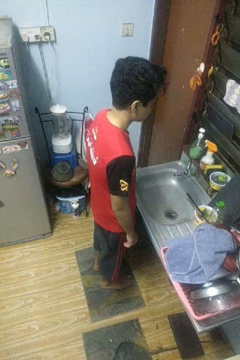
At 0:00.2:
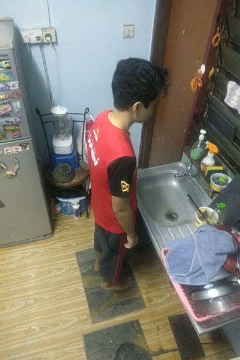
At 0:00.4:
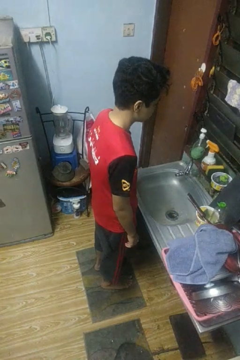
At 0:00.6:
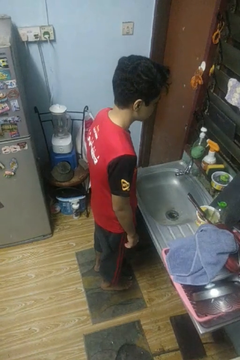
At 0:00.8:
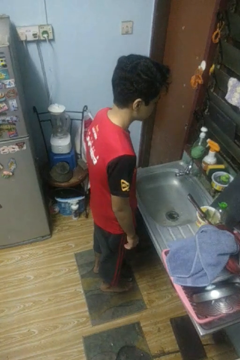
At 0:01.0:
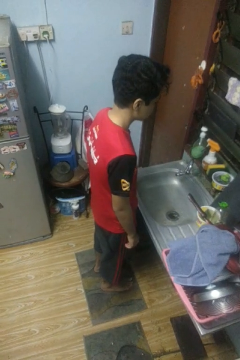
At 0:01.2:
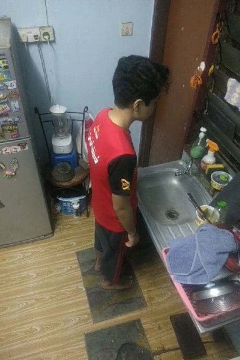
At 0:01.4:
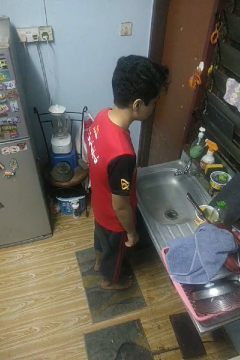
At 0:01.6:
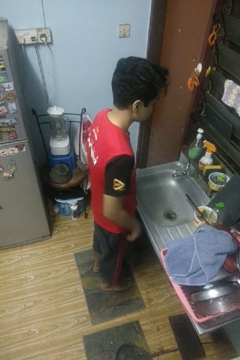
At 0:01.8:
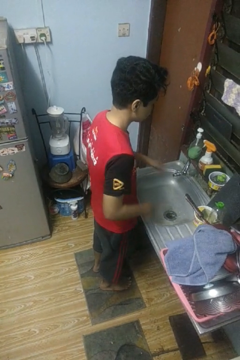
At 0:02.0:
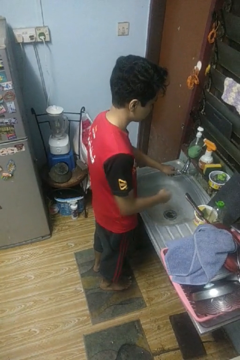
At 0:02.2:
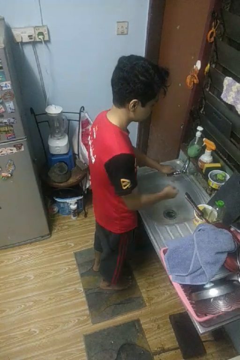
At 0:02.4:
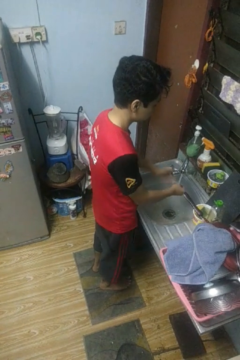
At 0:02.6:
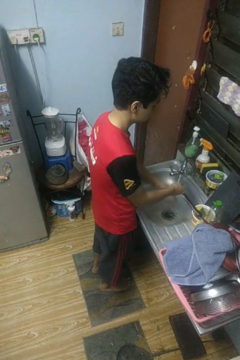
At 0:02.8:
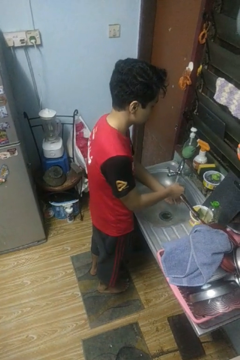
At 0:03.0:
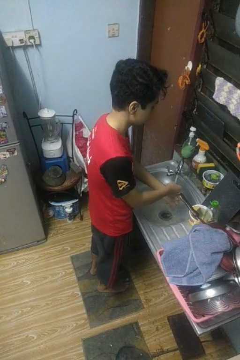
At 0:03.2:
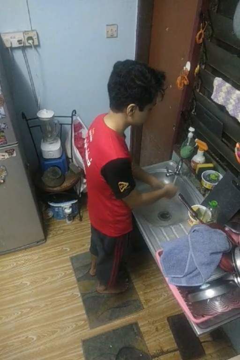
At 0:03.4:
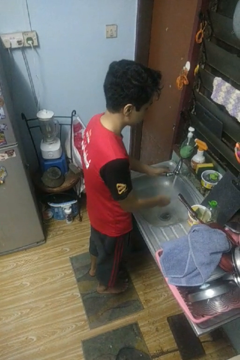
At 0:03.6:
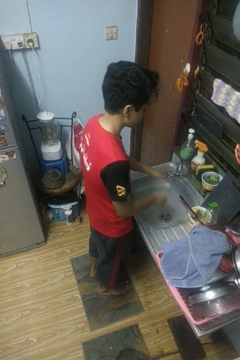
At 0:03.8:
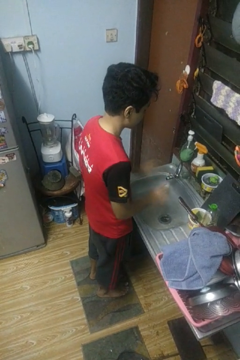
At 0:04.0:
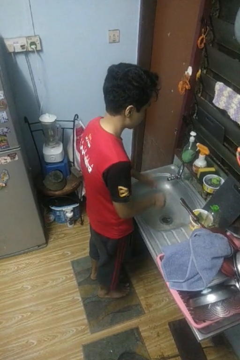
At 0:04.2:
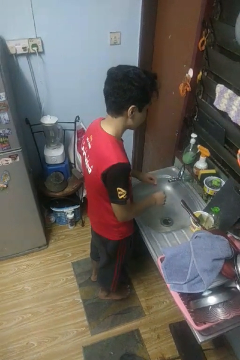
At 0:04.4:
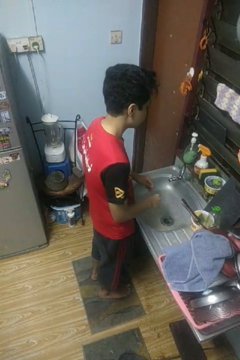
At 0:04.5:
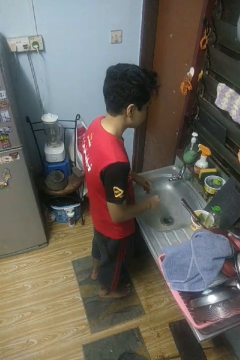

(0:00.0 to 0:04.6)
person washes hands

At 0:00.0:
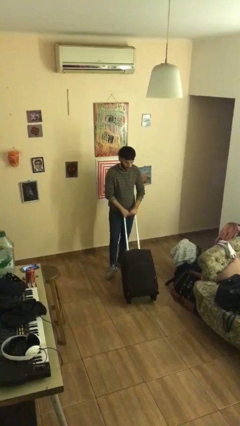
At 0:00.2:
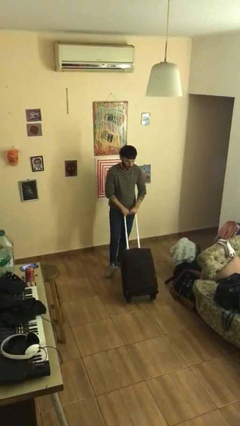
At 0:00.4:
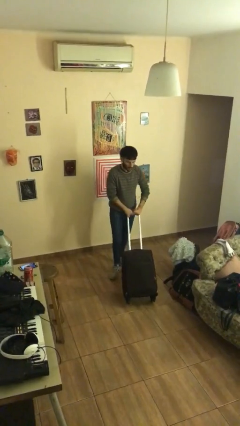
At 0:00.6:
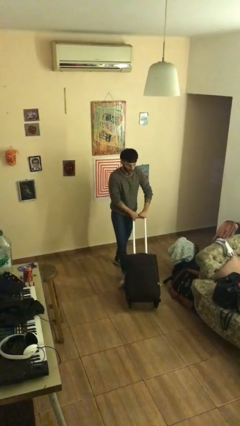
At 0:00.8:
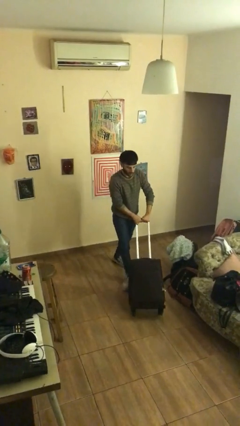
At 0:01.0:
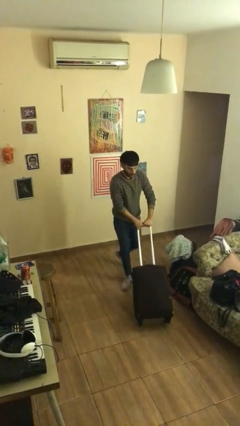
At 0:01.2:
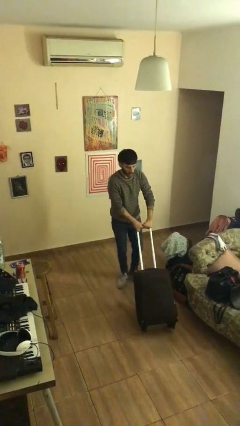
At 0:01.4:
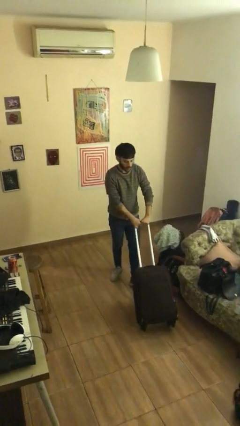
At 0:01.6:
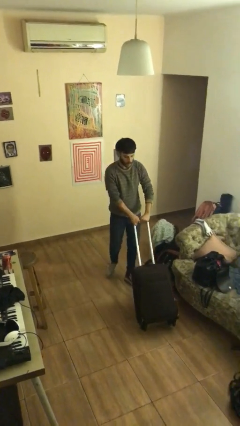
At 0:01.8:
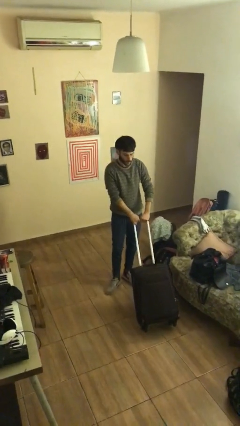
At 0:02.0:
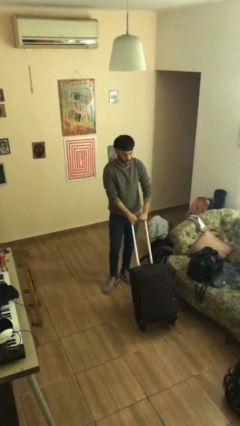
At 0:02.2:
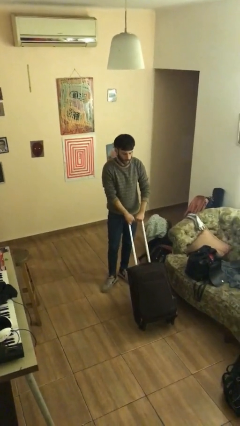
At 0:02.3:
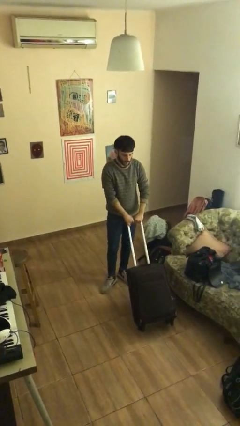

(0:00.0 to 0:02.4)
person pushes wheeled cart

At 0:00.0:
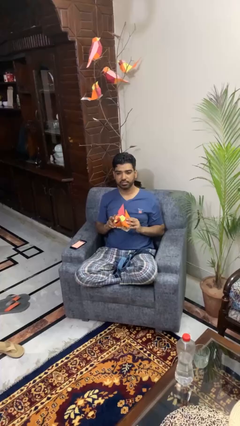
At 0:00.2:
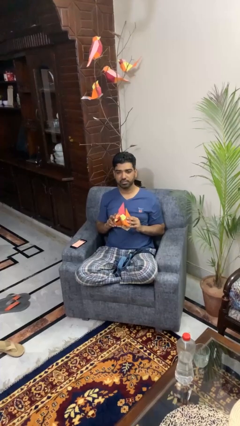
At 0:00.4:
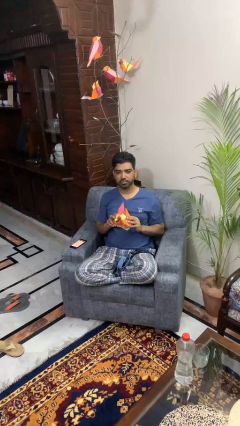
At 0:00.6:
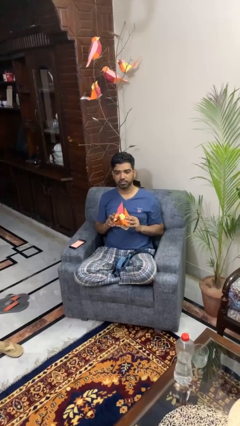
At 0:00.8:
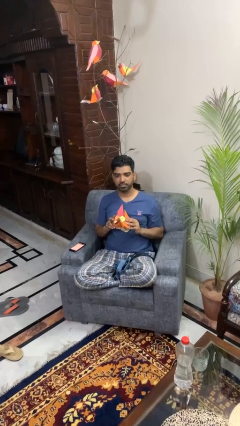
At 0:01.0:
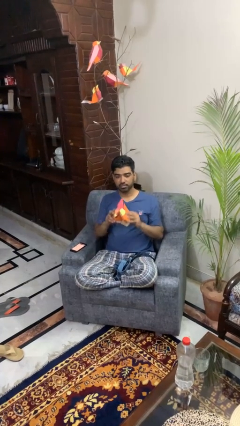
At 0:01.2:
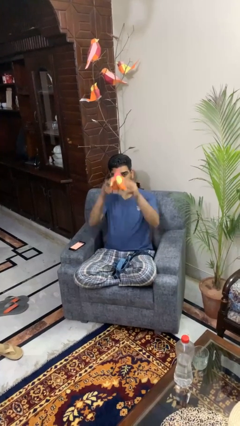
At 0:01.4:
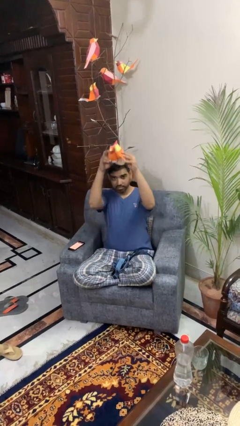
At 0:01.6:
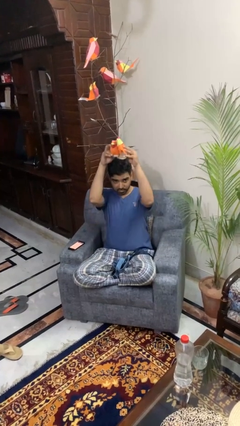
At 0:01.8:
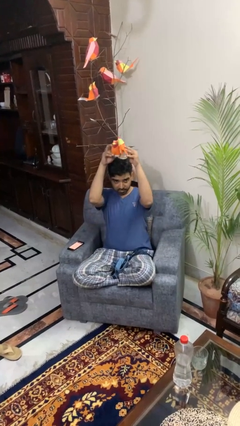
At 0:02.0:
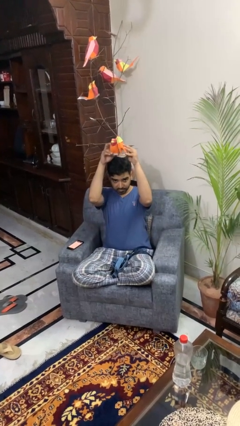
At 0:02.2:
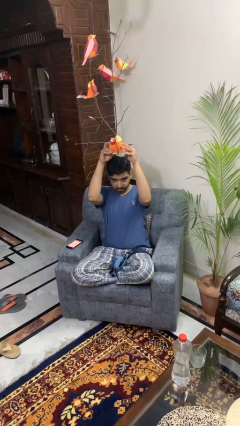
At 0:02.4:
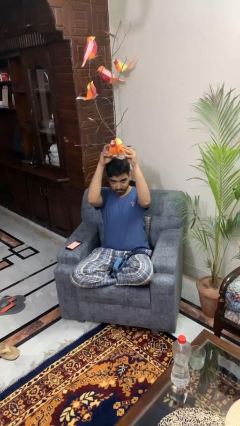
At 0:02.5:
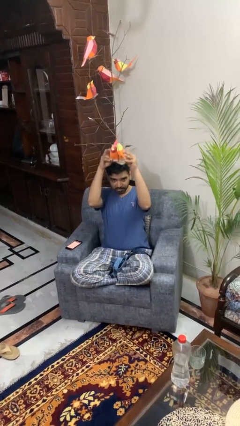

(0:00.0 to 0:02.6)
person holds object above head

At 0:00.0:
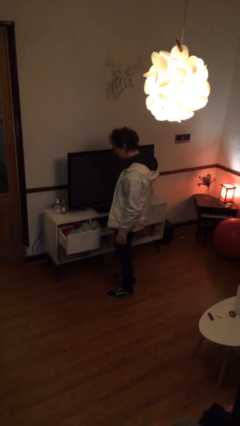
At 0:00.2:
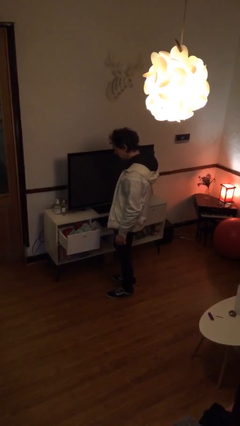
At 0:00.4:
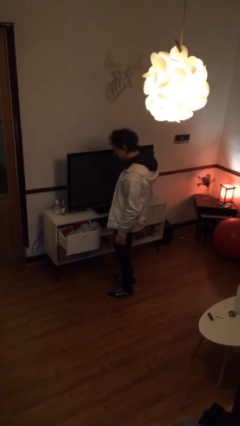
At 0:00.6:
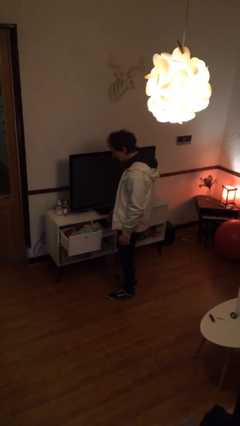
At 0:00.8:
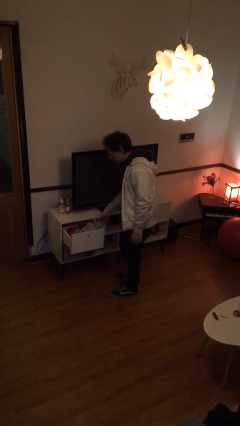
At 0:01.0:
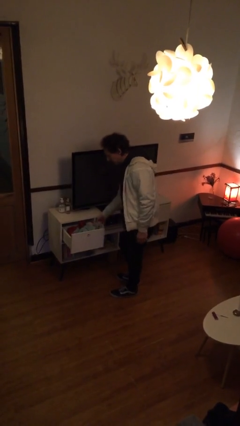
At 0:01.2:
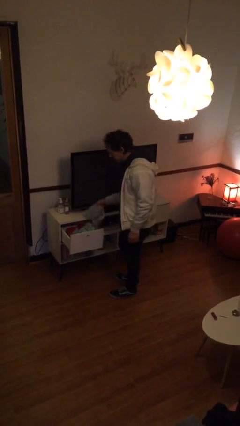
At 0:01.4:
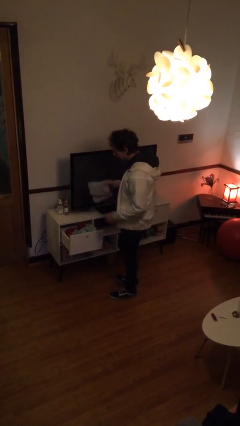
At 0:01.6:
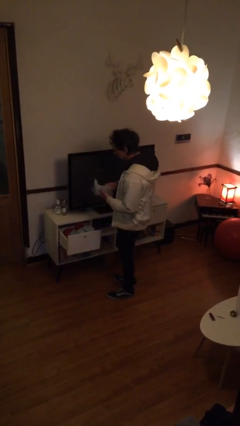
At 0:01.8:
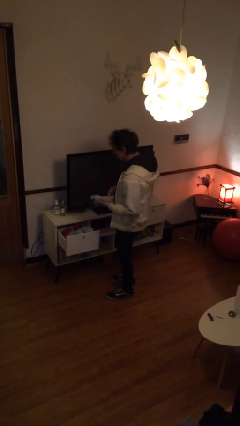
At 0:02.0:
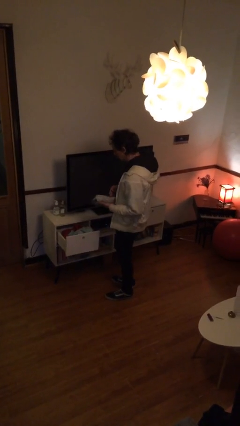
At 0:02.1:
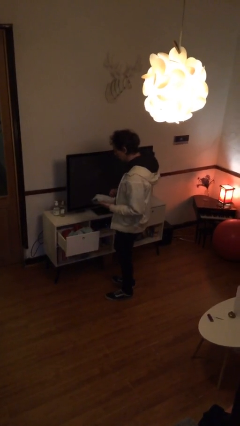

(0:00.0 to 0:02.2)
person takes clothes from dresser

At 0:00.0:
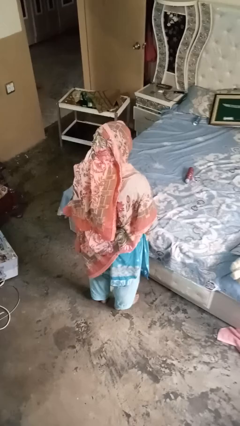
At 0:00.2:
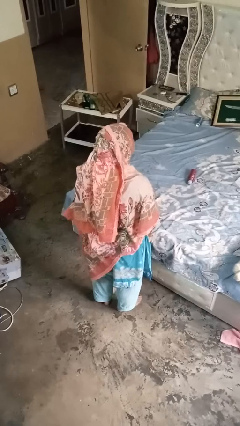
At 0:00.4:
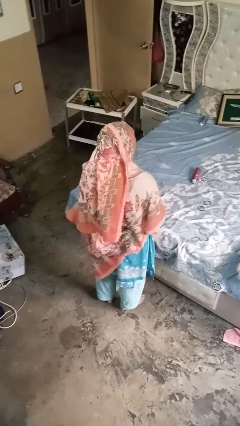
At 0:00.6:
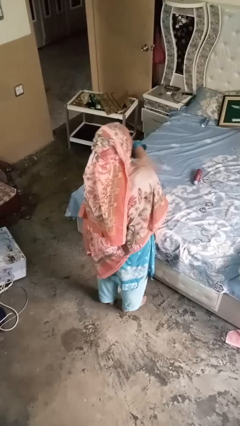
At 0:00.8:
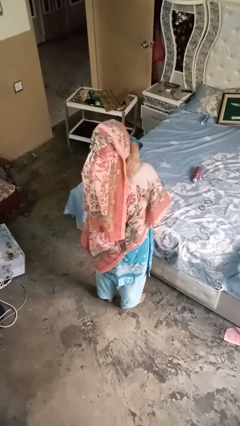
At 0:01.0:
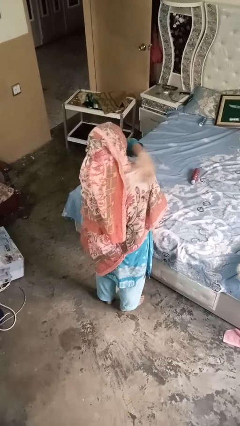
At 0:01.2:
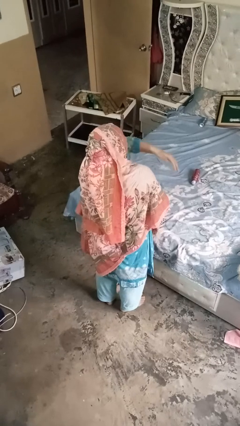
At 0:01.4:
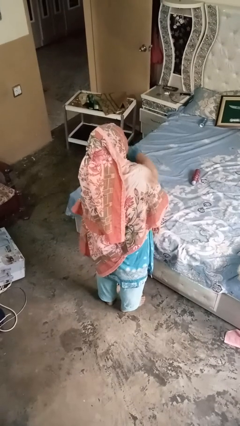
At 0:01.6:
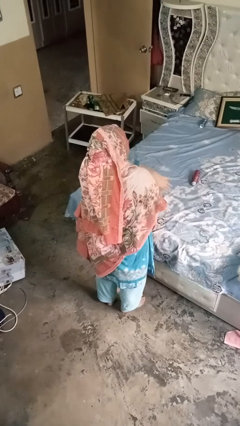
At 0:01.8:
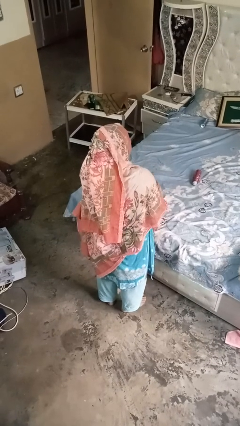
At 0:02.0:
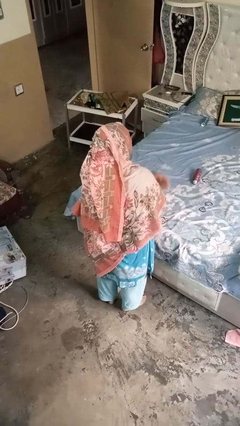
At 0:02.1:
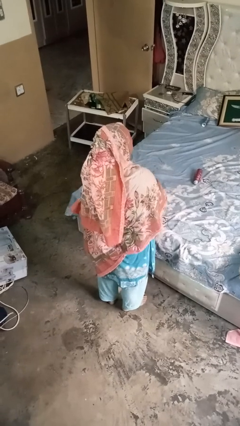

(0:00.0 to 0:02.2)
person swats bug

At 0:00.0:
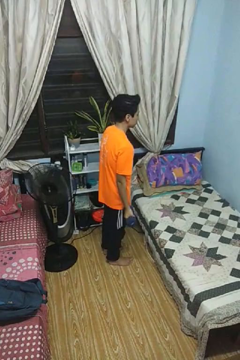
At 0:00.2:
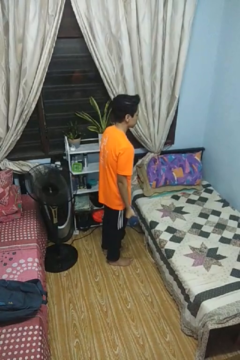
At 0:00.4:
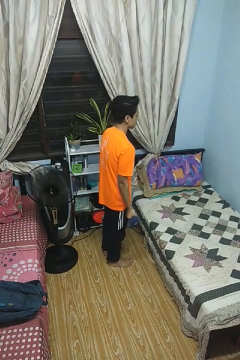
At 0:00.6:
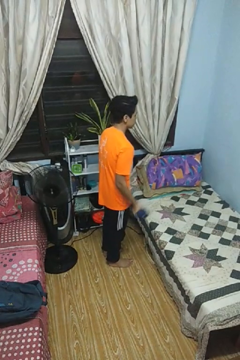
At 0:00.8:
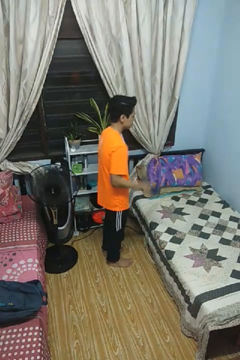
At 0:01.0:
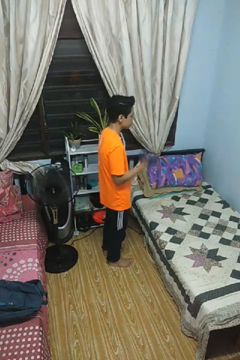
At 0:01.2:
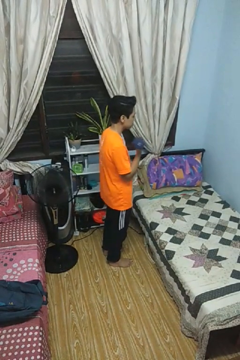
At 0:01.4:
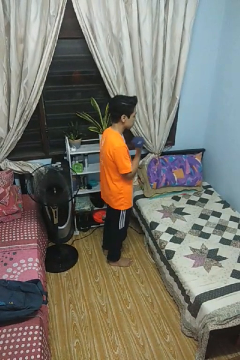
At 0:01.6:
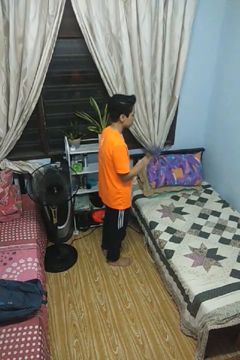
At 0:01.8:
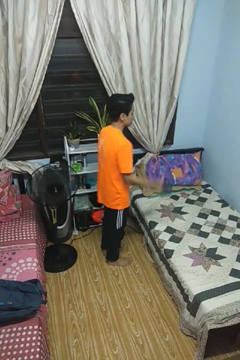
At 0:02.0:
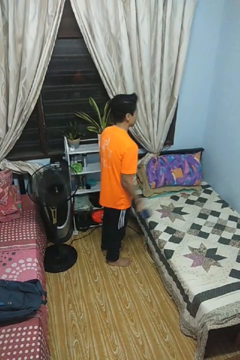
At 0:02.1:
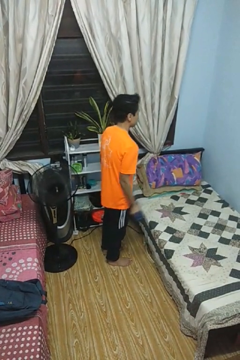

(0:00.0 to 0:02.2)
person lifts dumbbells

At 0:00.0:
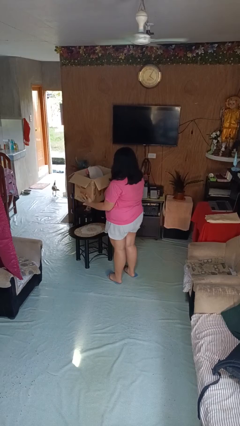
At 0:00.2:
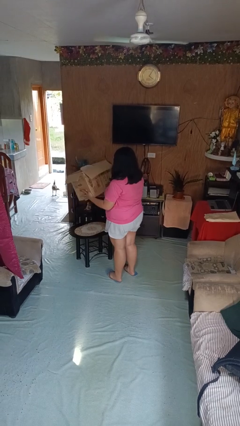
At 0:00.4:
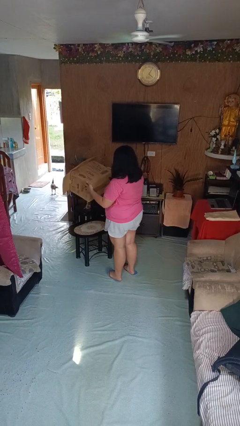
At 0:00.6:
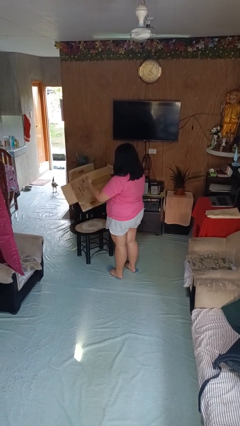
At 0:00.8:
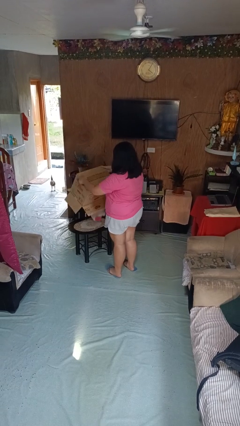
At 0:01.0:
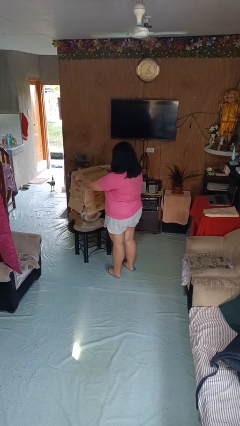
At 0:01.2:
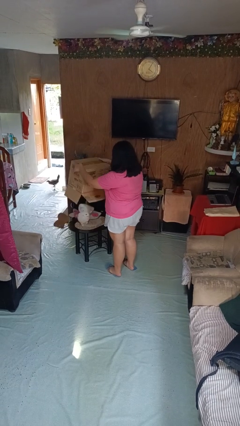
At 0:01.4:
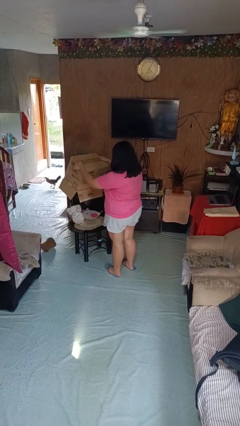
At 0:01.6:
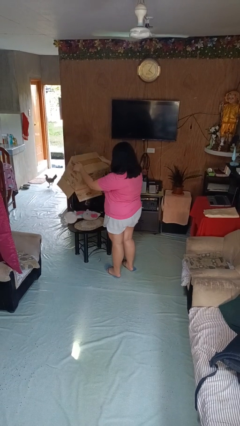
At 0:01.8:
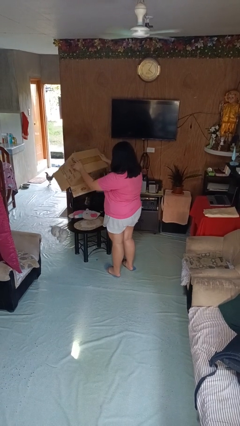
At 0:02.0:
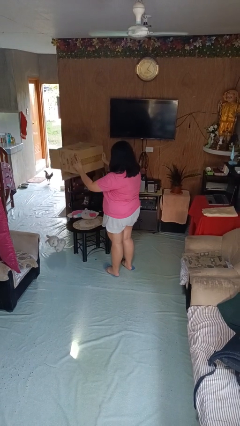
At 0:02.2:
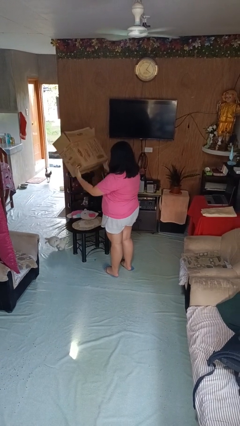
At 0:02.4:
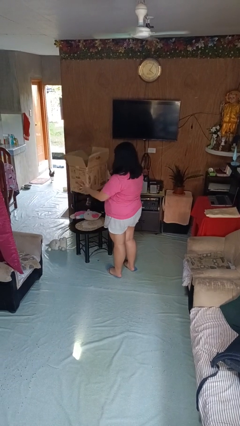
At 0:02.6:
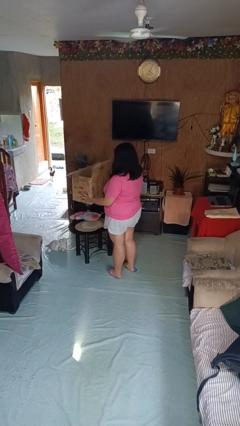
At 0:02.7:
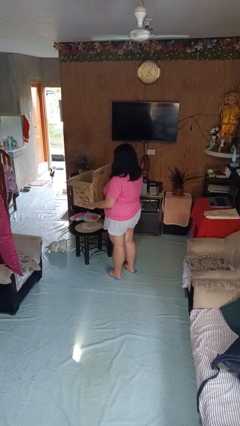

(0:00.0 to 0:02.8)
person unloads box onto table
